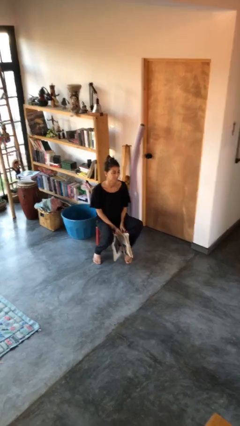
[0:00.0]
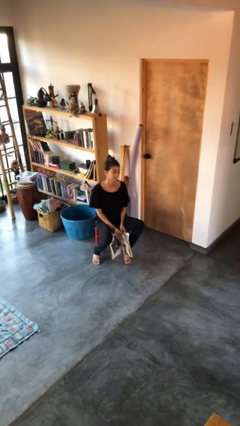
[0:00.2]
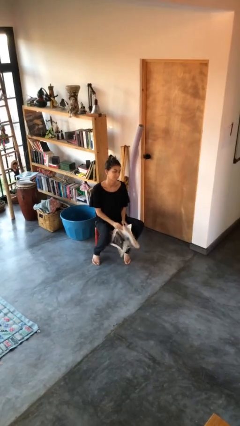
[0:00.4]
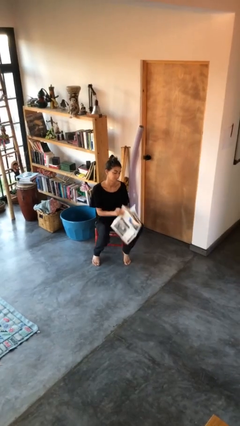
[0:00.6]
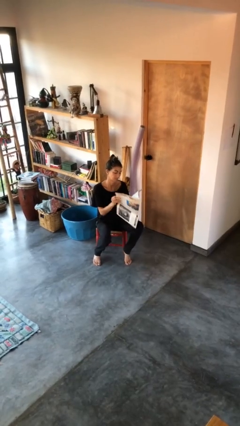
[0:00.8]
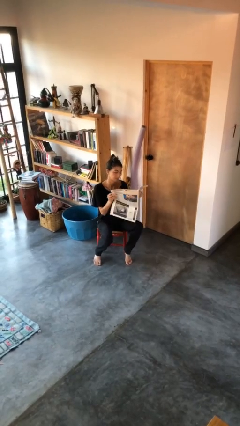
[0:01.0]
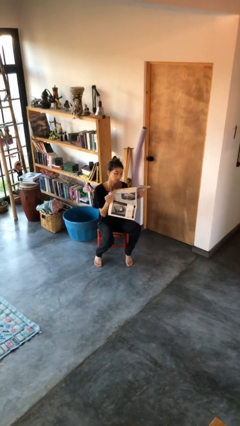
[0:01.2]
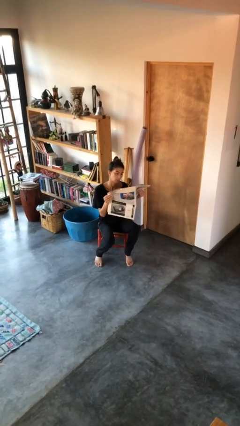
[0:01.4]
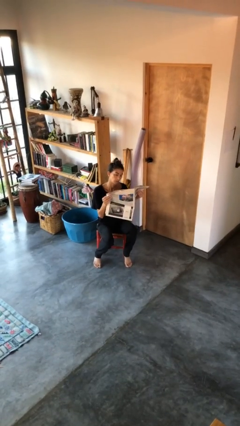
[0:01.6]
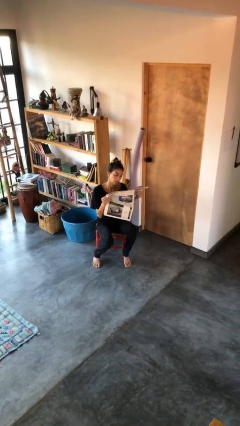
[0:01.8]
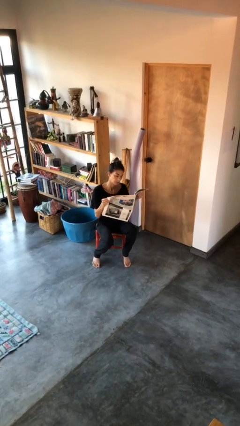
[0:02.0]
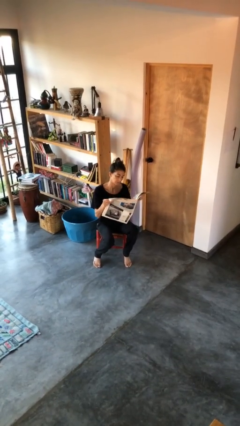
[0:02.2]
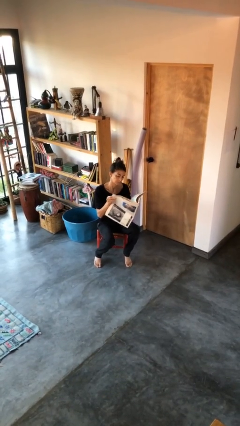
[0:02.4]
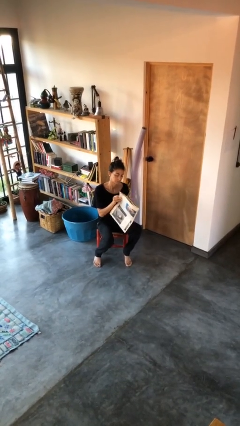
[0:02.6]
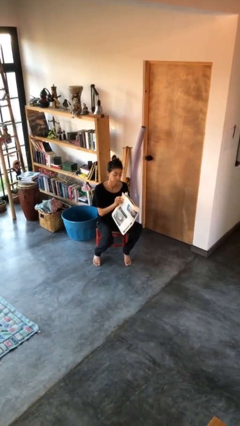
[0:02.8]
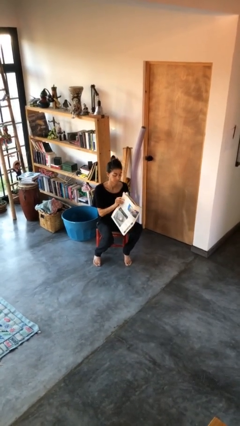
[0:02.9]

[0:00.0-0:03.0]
person reads newspaper

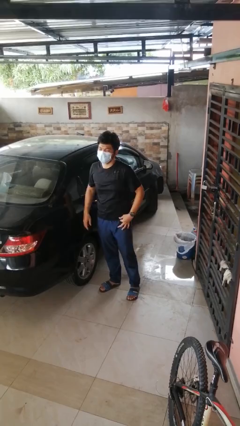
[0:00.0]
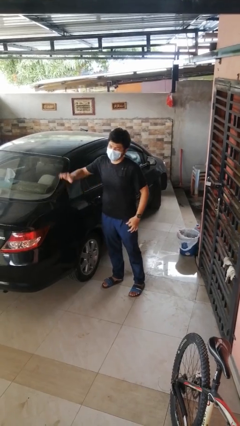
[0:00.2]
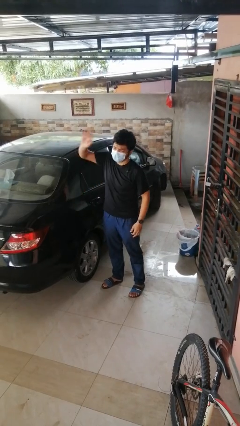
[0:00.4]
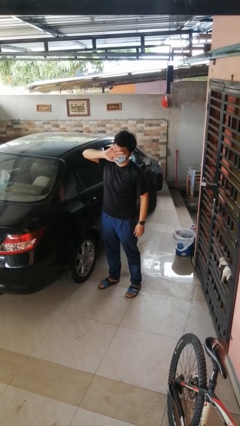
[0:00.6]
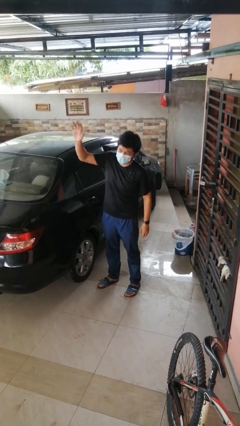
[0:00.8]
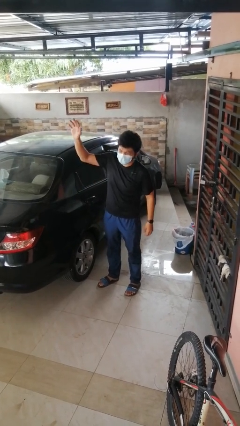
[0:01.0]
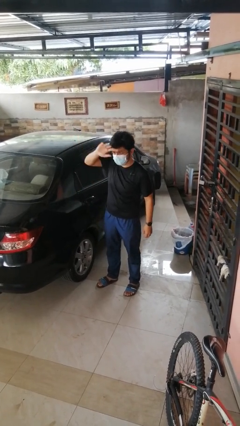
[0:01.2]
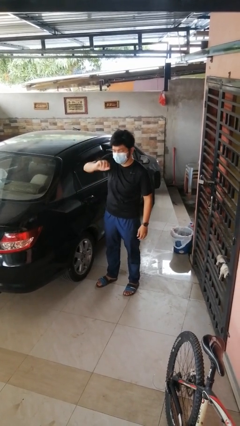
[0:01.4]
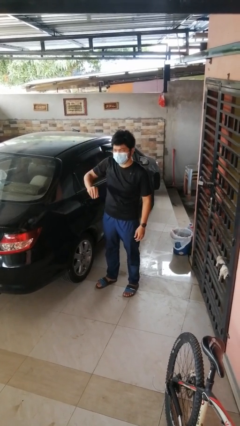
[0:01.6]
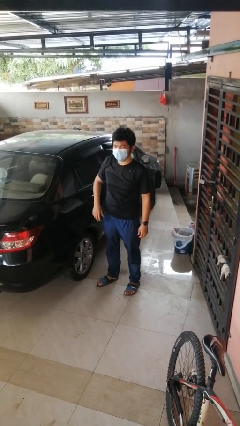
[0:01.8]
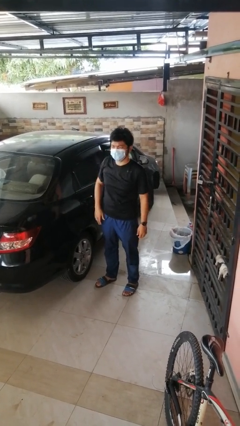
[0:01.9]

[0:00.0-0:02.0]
person waves at person

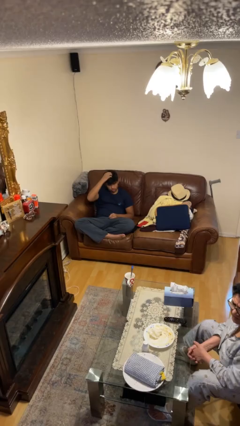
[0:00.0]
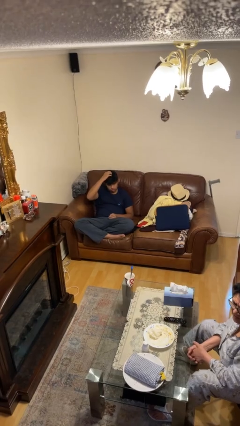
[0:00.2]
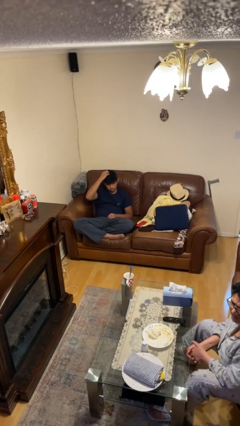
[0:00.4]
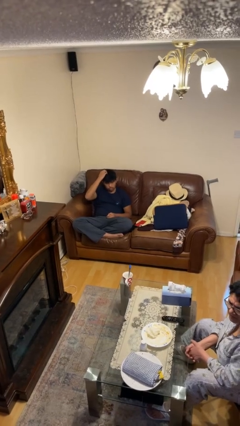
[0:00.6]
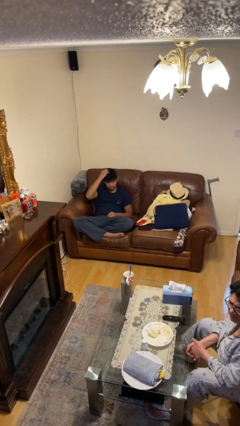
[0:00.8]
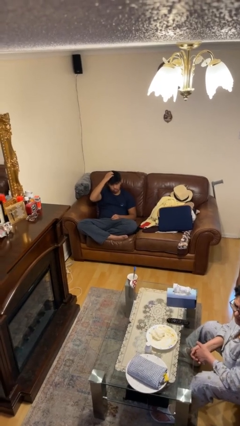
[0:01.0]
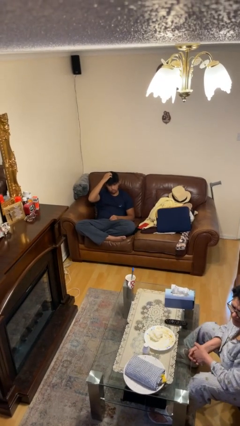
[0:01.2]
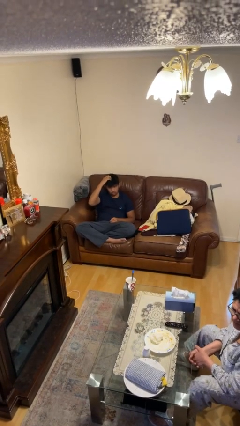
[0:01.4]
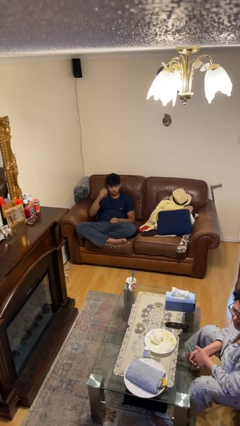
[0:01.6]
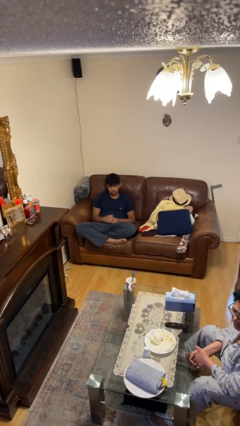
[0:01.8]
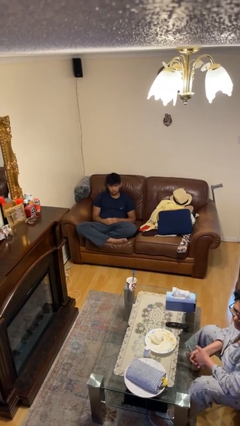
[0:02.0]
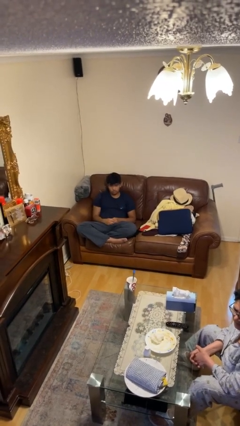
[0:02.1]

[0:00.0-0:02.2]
person strokes hair

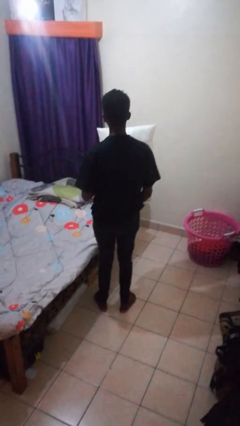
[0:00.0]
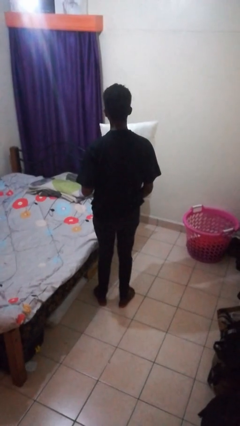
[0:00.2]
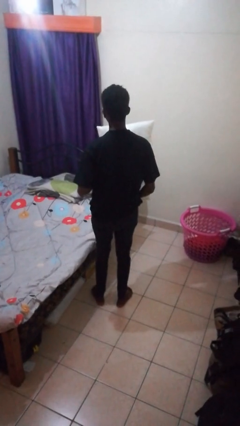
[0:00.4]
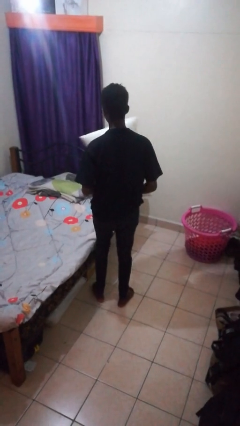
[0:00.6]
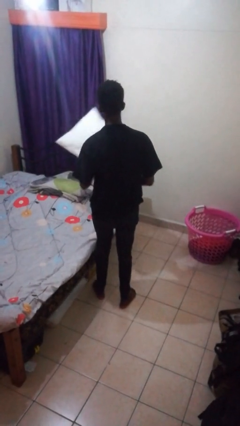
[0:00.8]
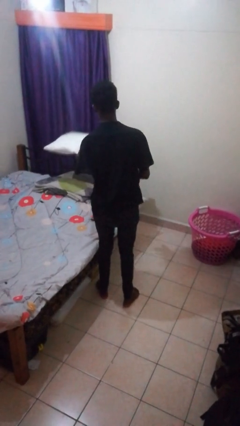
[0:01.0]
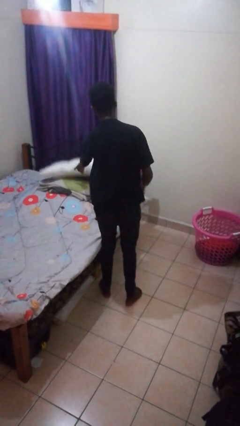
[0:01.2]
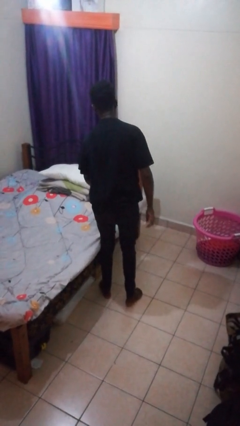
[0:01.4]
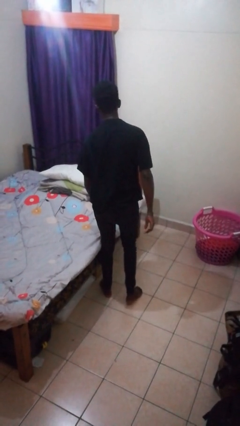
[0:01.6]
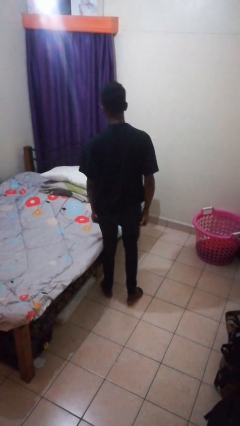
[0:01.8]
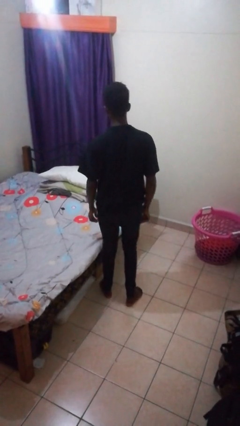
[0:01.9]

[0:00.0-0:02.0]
person puts down object on bed

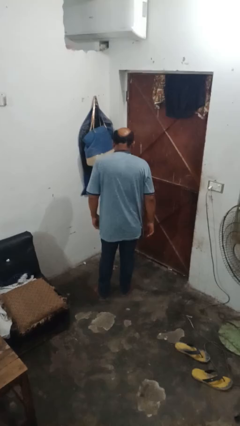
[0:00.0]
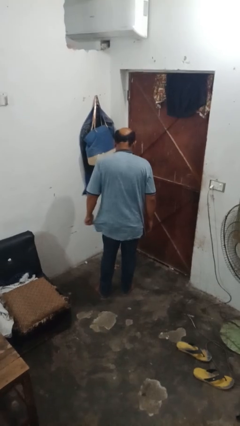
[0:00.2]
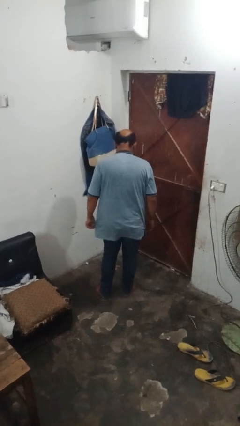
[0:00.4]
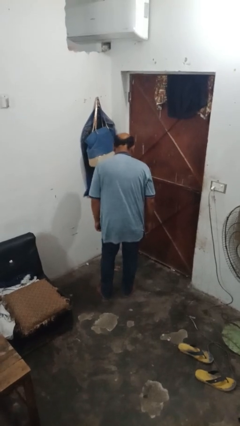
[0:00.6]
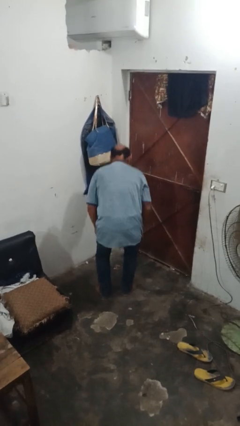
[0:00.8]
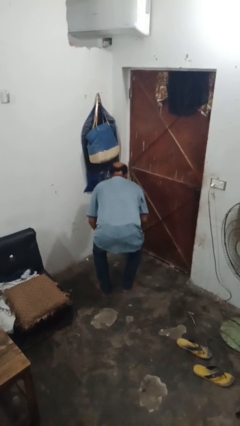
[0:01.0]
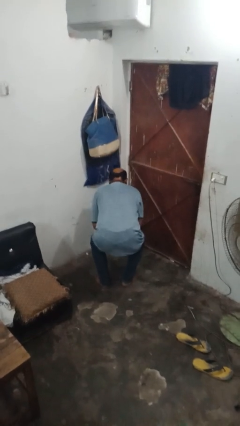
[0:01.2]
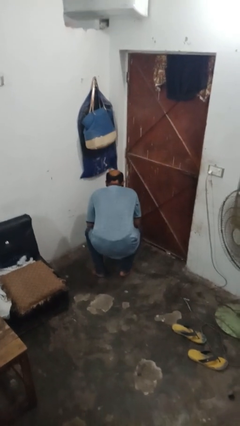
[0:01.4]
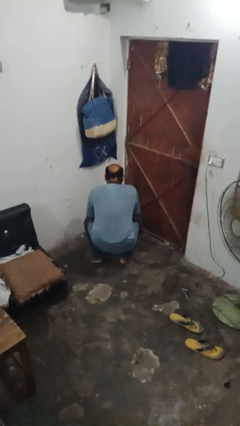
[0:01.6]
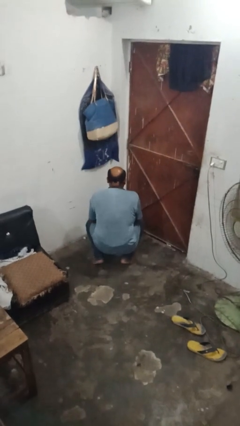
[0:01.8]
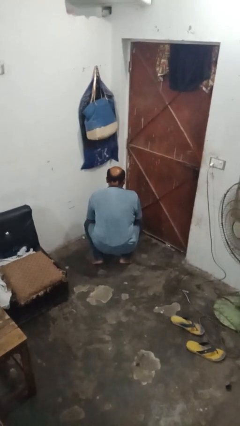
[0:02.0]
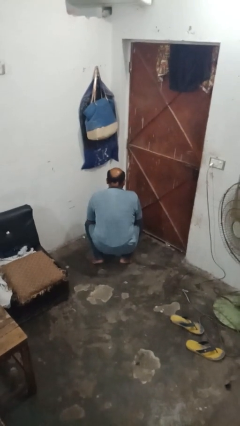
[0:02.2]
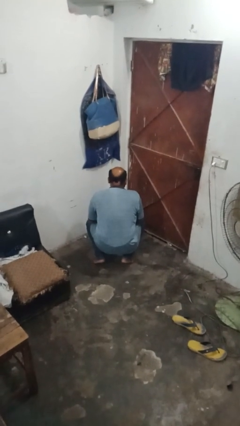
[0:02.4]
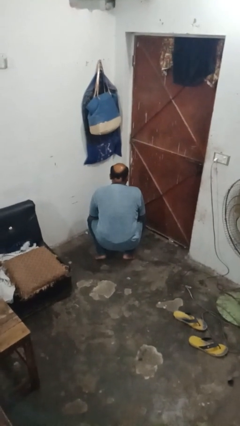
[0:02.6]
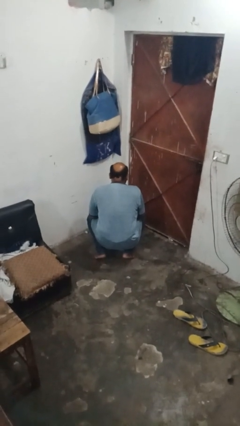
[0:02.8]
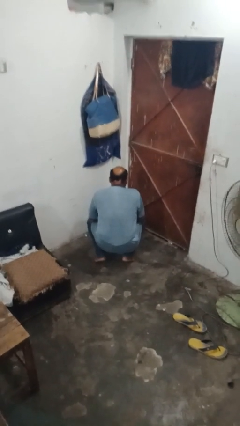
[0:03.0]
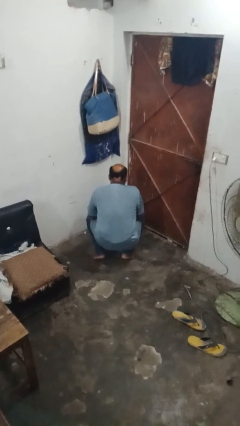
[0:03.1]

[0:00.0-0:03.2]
person exercises with situp

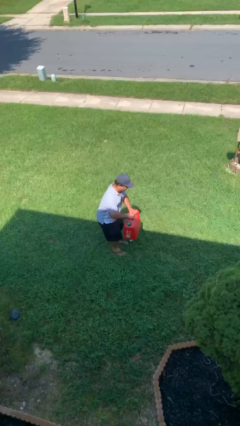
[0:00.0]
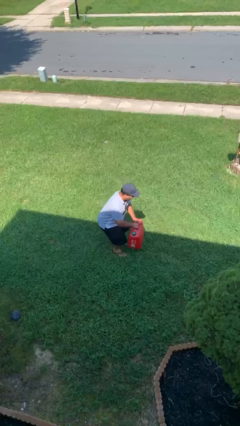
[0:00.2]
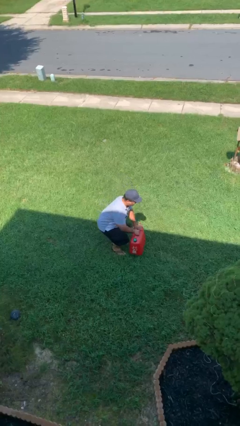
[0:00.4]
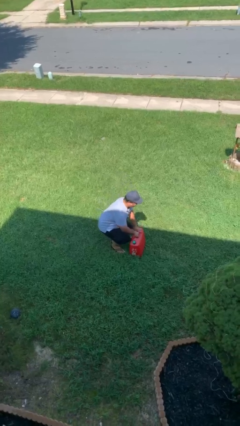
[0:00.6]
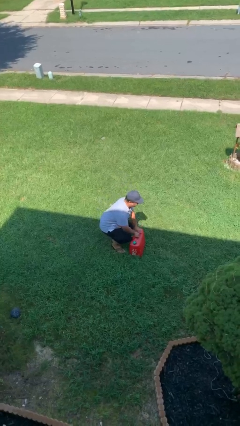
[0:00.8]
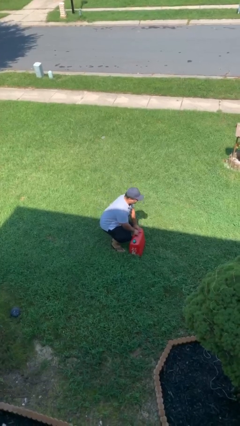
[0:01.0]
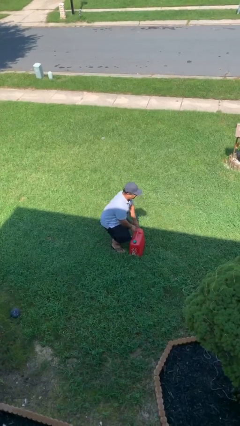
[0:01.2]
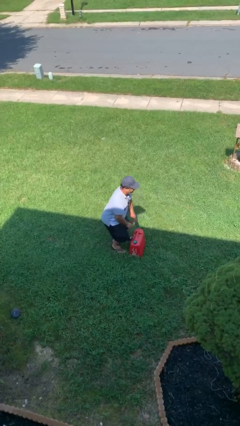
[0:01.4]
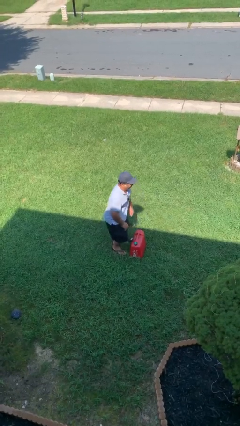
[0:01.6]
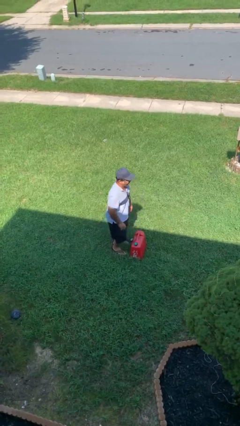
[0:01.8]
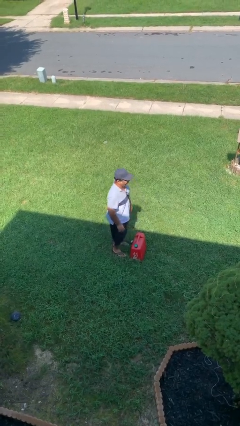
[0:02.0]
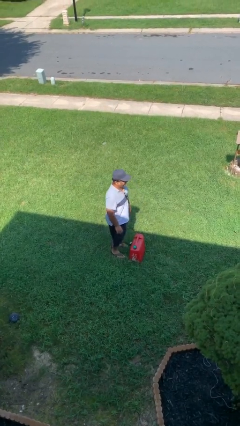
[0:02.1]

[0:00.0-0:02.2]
person puts down object on floor

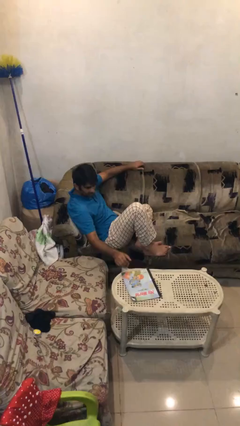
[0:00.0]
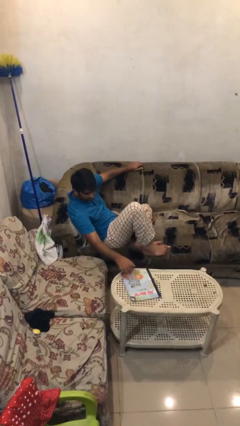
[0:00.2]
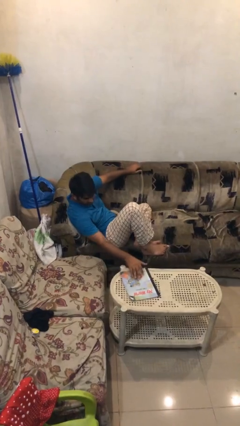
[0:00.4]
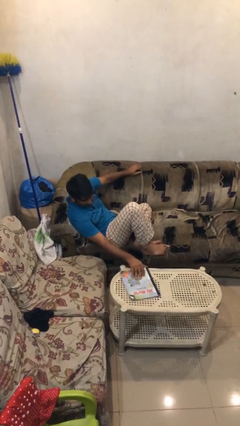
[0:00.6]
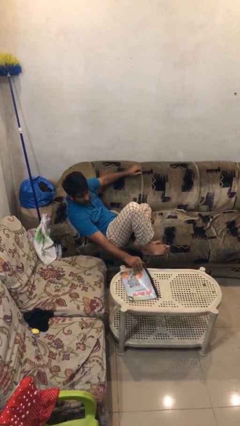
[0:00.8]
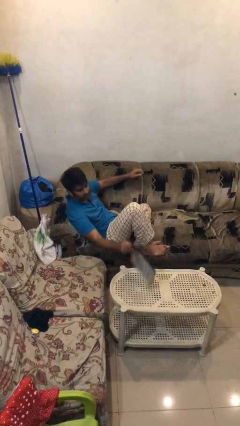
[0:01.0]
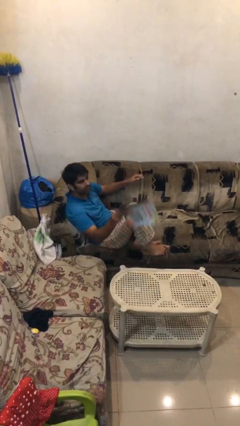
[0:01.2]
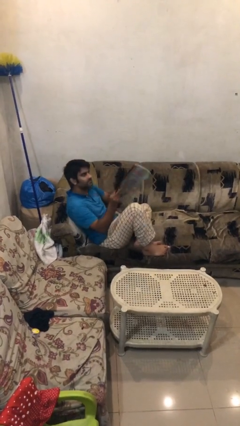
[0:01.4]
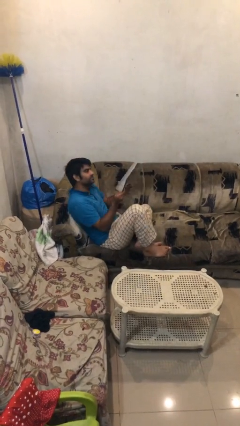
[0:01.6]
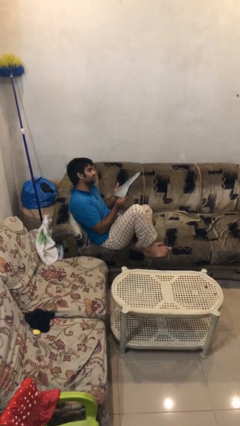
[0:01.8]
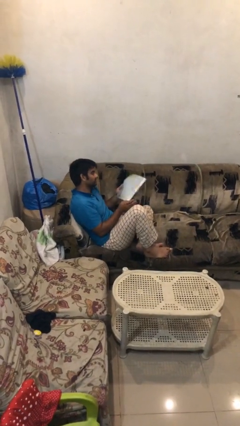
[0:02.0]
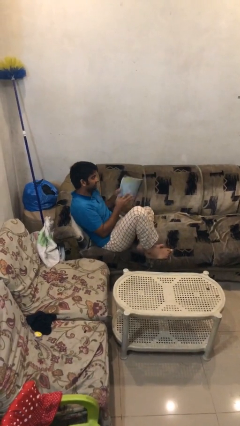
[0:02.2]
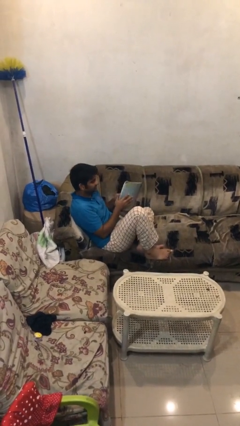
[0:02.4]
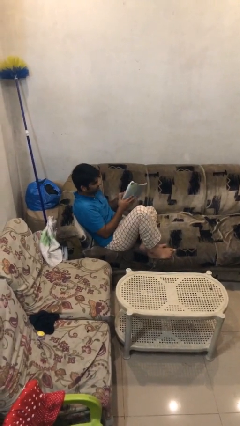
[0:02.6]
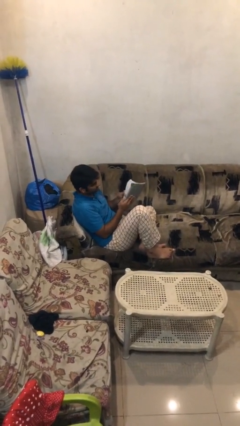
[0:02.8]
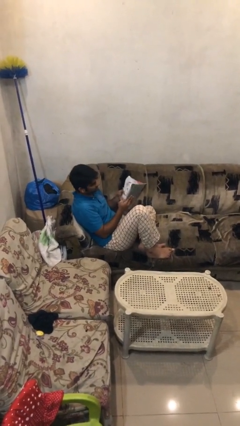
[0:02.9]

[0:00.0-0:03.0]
person picks up object from table
